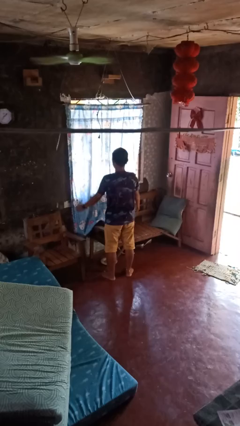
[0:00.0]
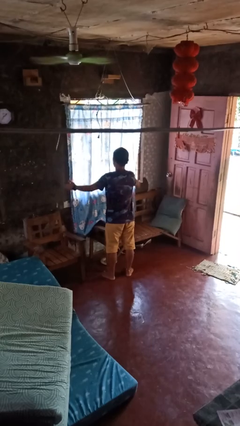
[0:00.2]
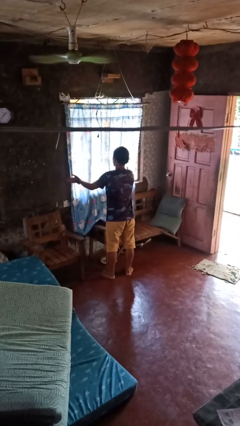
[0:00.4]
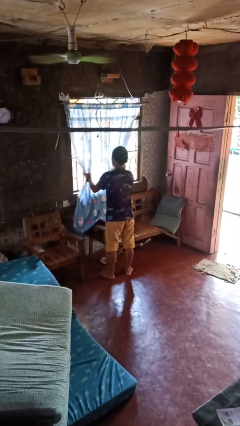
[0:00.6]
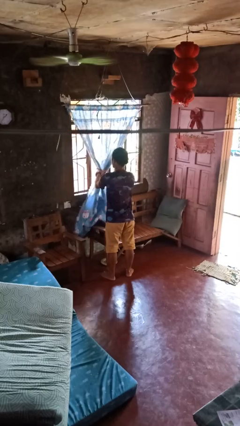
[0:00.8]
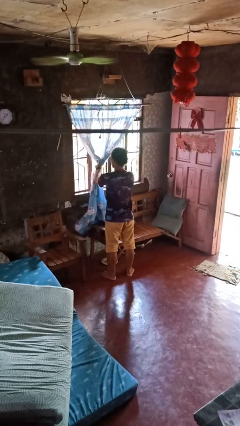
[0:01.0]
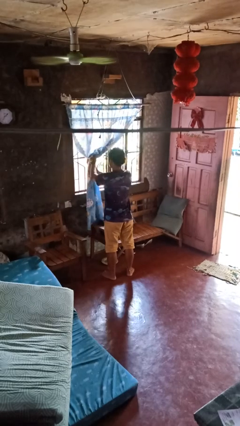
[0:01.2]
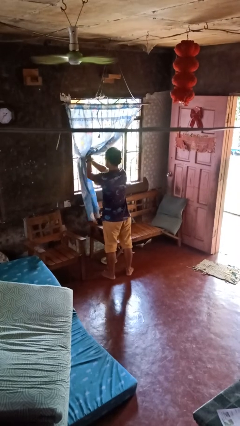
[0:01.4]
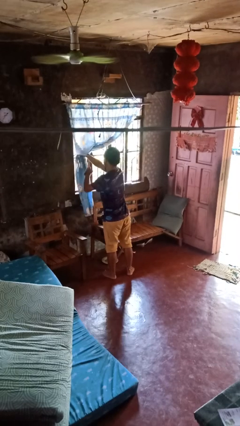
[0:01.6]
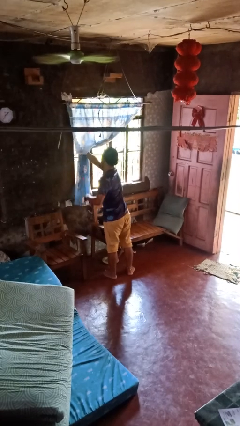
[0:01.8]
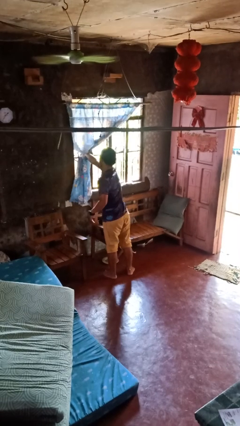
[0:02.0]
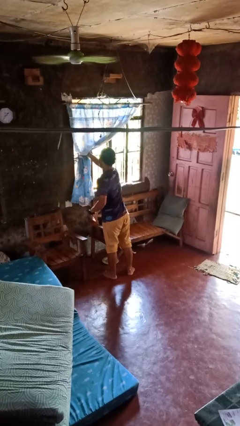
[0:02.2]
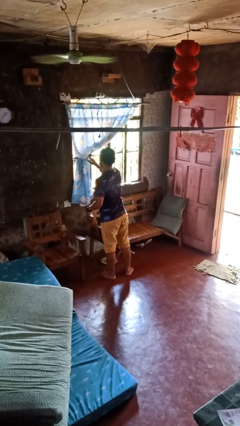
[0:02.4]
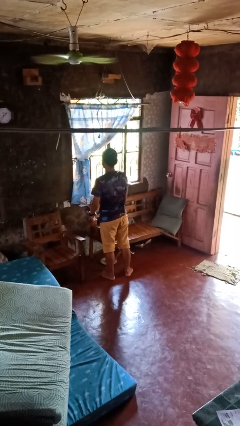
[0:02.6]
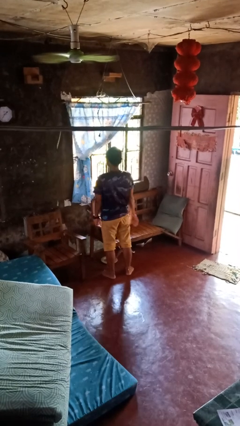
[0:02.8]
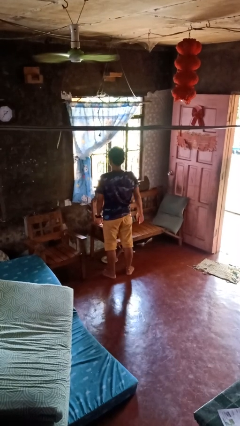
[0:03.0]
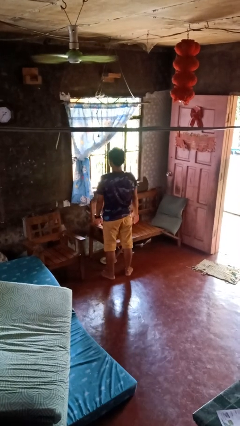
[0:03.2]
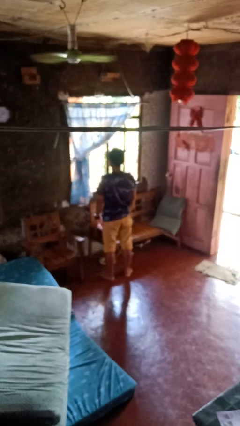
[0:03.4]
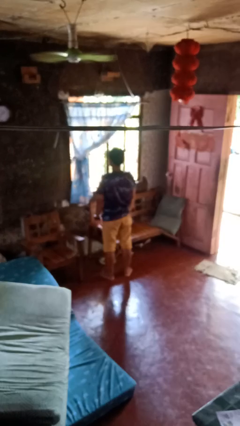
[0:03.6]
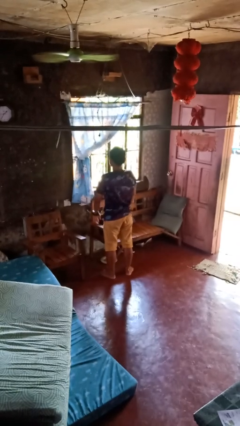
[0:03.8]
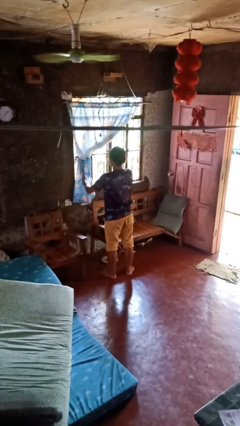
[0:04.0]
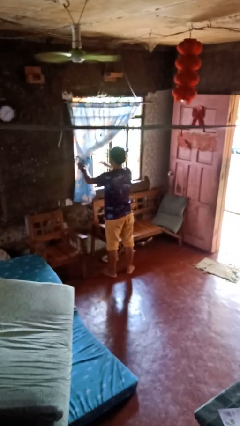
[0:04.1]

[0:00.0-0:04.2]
person opens curtains

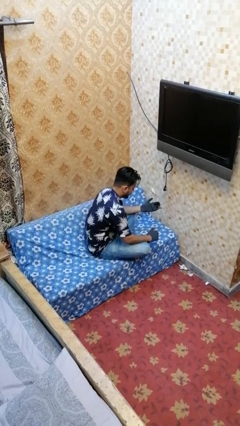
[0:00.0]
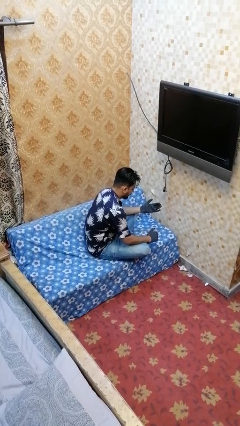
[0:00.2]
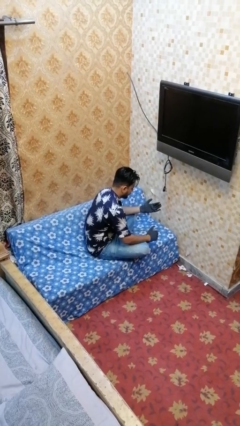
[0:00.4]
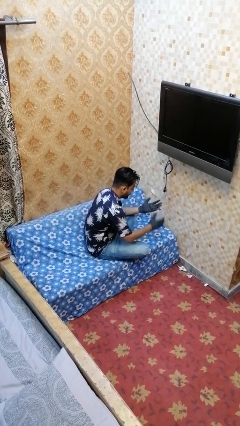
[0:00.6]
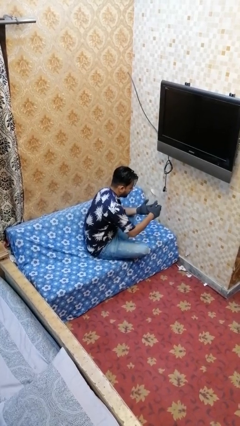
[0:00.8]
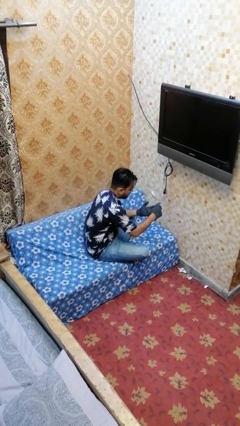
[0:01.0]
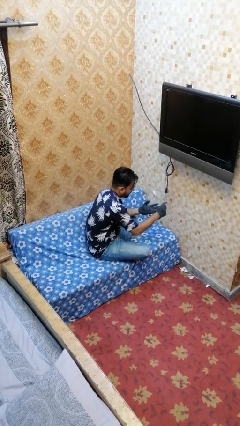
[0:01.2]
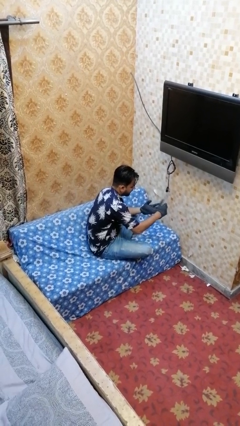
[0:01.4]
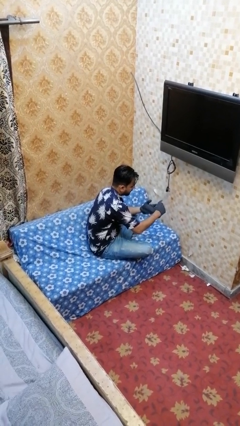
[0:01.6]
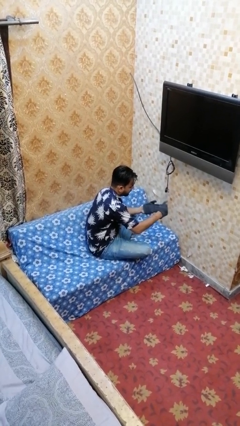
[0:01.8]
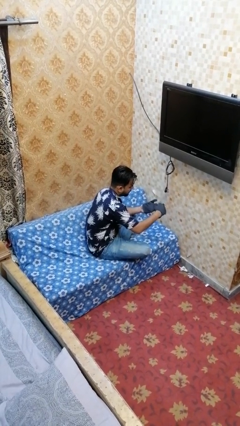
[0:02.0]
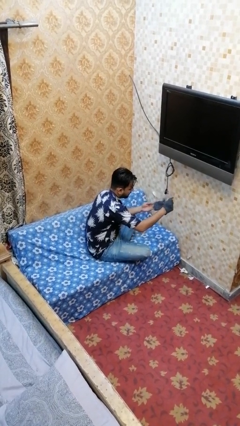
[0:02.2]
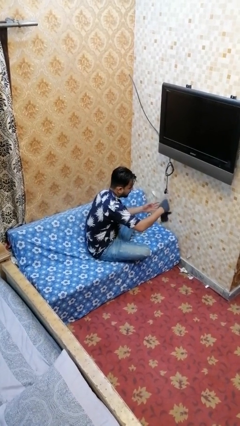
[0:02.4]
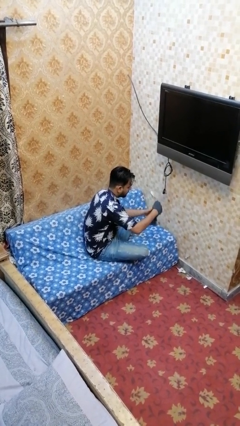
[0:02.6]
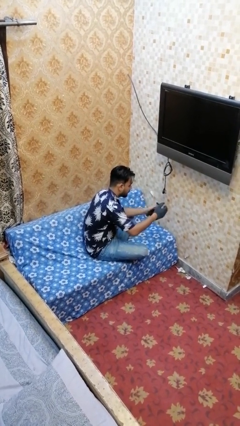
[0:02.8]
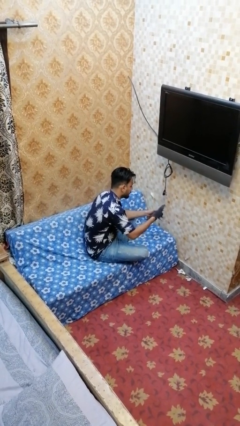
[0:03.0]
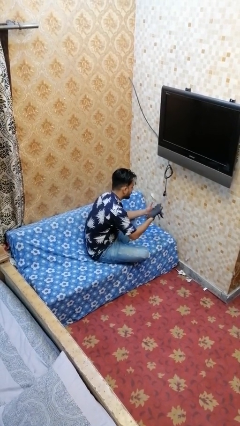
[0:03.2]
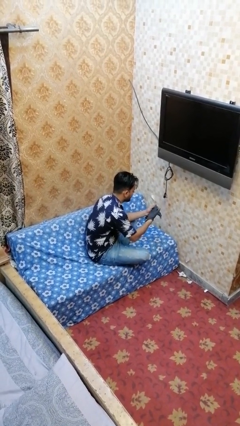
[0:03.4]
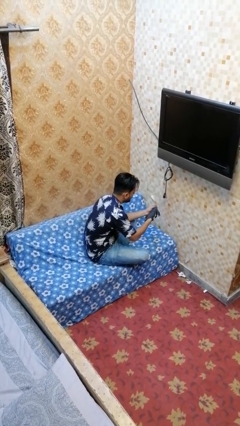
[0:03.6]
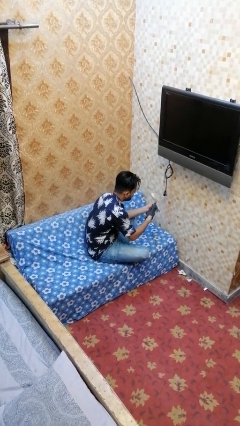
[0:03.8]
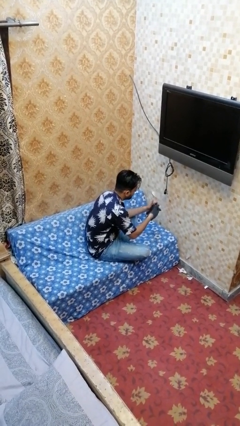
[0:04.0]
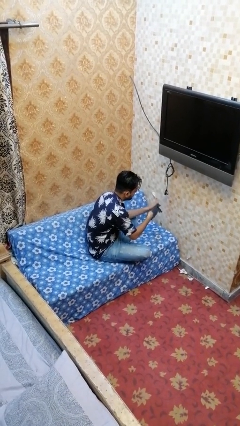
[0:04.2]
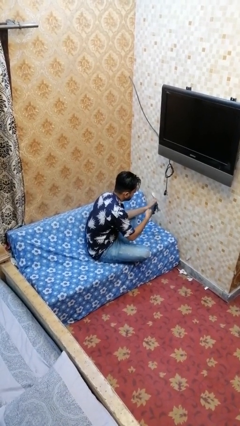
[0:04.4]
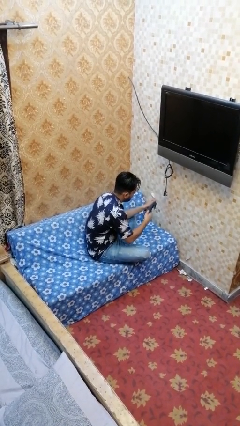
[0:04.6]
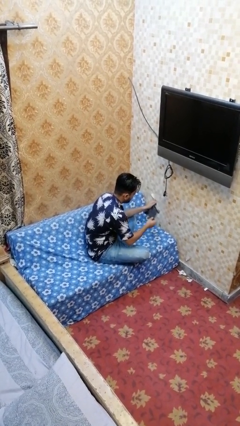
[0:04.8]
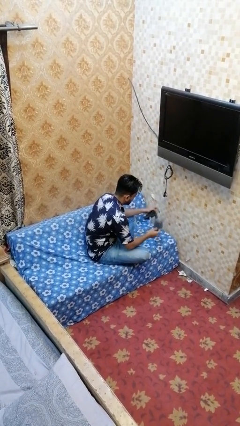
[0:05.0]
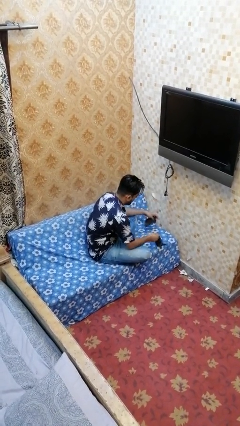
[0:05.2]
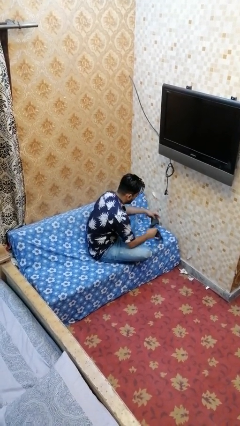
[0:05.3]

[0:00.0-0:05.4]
person takes off gloves

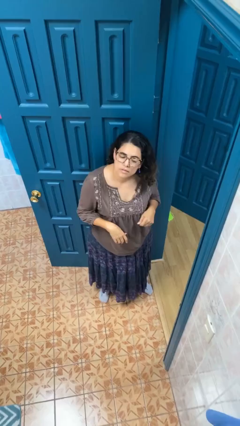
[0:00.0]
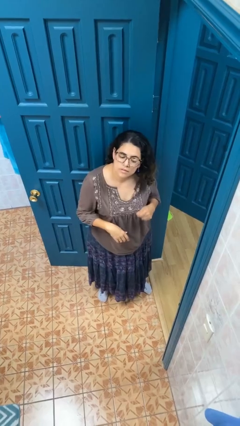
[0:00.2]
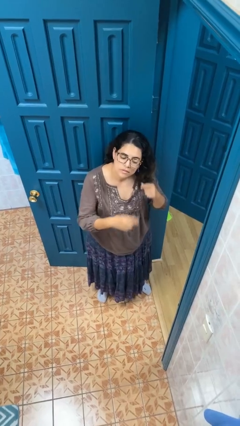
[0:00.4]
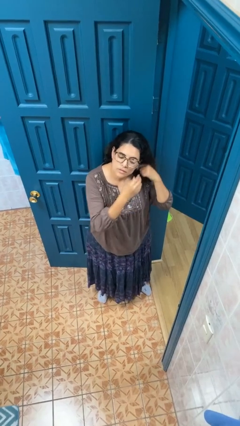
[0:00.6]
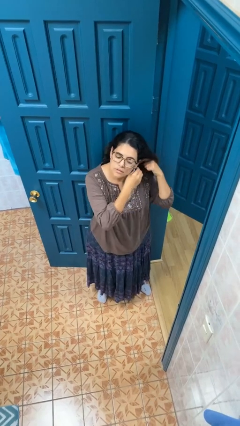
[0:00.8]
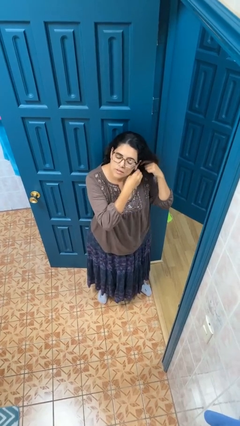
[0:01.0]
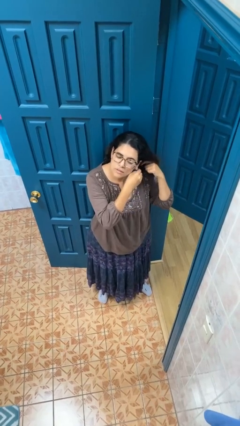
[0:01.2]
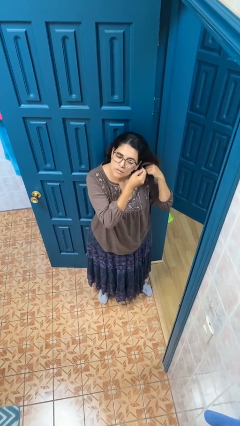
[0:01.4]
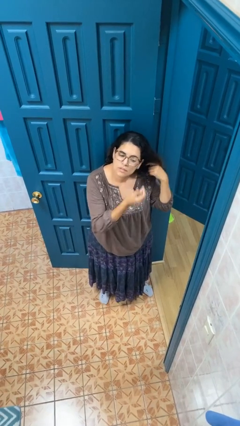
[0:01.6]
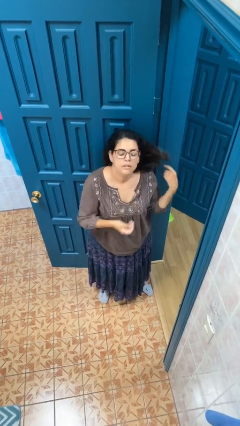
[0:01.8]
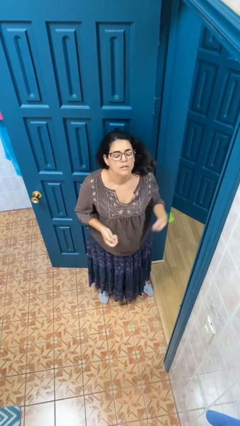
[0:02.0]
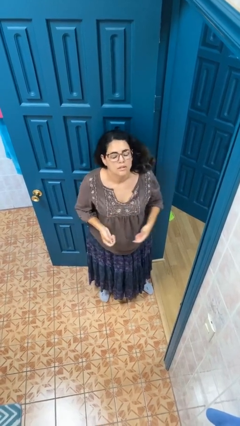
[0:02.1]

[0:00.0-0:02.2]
person takes off earrings

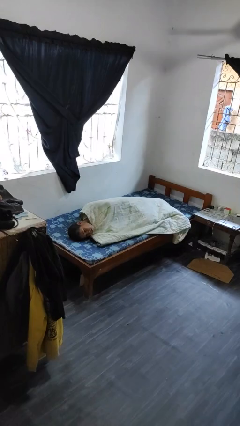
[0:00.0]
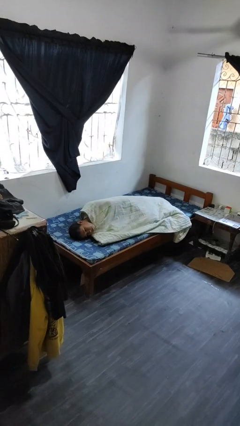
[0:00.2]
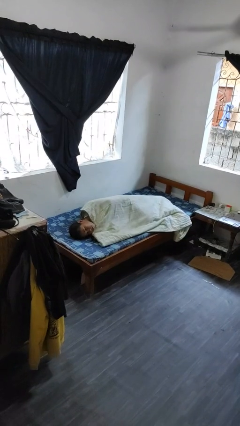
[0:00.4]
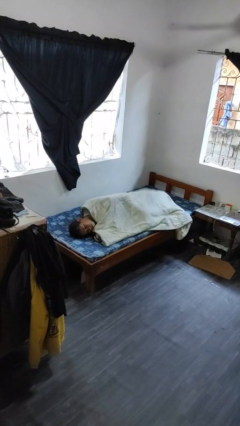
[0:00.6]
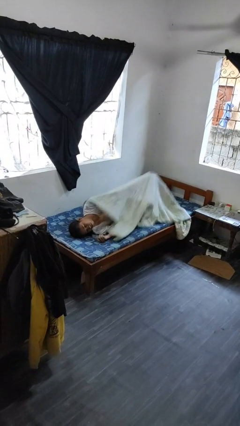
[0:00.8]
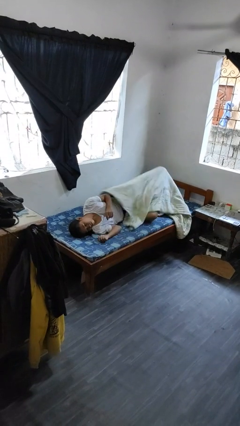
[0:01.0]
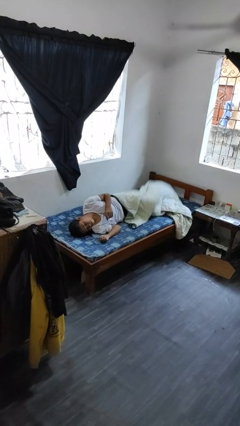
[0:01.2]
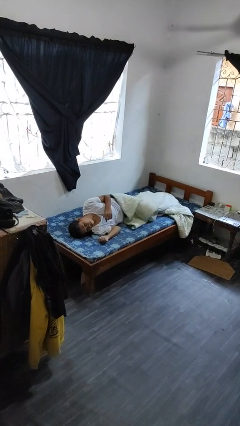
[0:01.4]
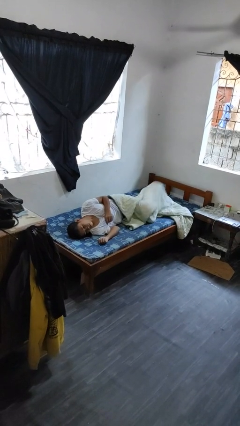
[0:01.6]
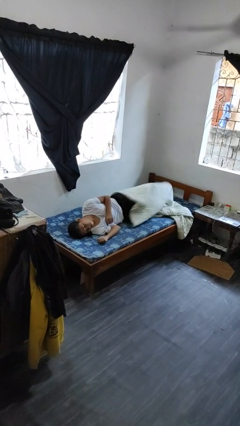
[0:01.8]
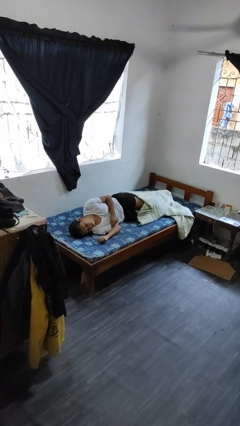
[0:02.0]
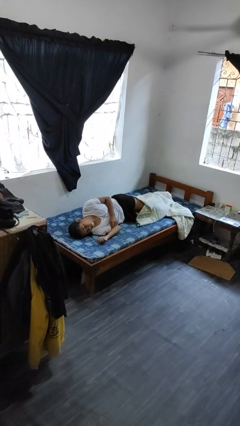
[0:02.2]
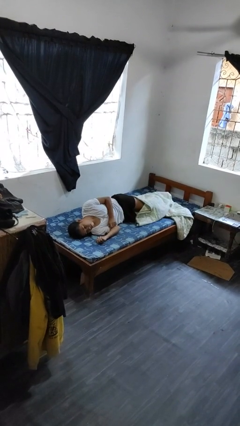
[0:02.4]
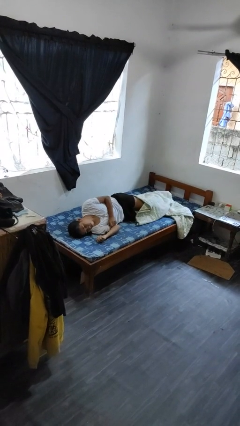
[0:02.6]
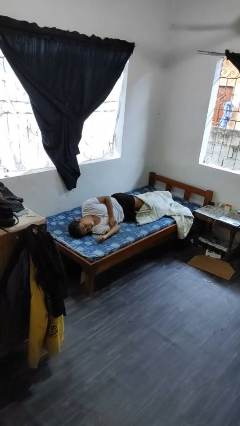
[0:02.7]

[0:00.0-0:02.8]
person uncovers with bedsheets

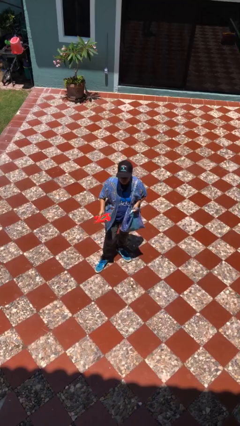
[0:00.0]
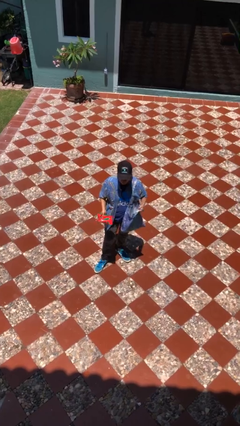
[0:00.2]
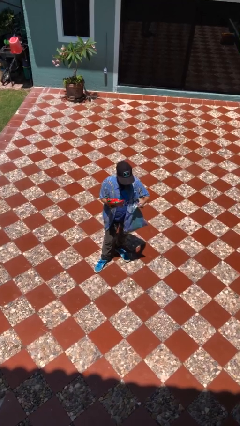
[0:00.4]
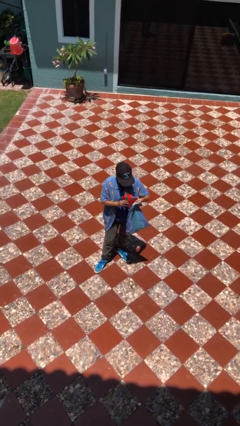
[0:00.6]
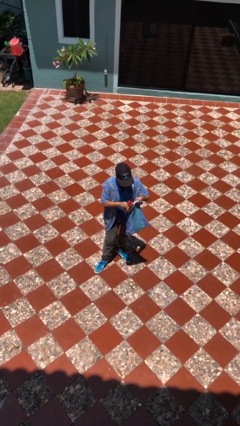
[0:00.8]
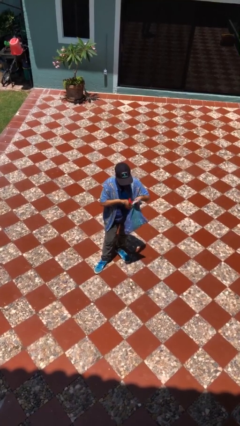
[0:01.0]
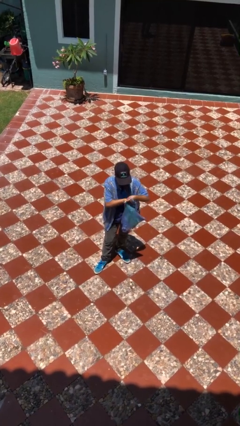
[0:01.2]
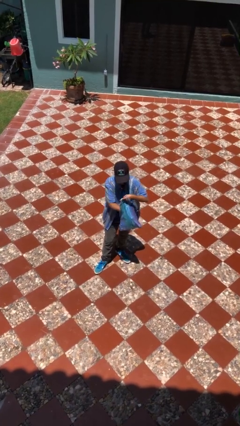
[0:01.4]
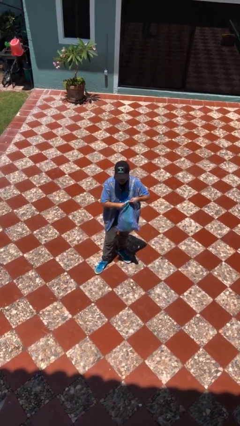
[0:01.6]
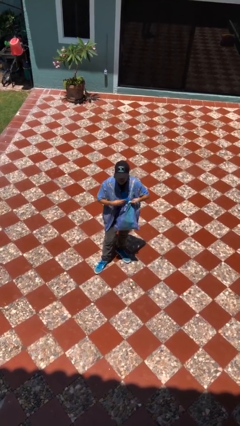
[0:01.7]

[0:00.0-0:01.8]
person puts object into purse

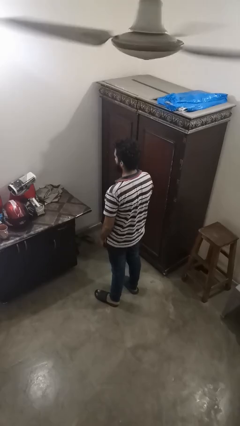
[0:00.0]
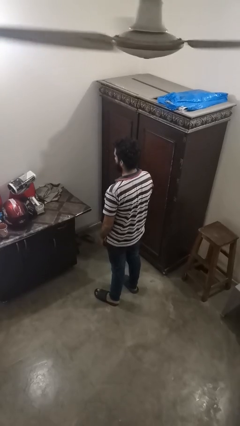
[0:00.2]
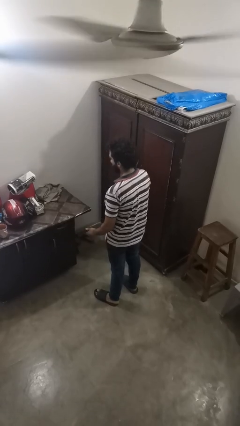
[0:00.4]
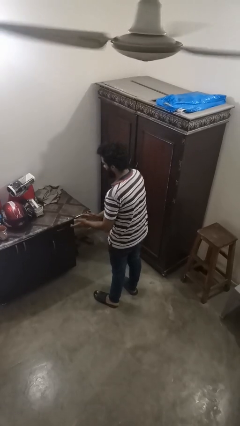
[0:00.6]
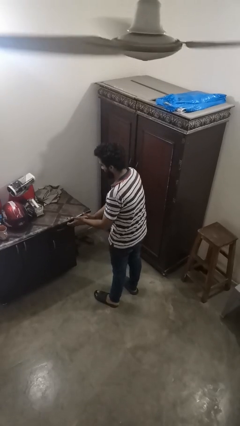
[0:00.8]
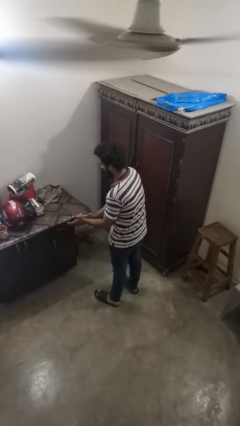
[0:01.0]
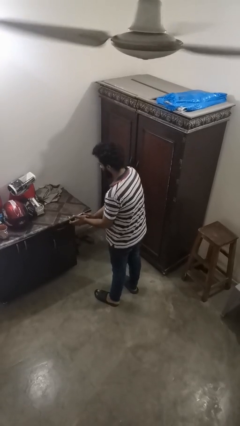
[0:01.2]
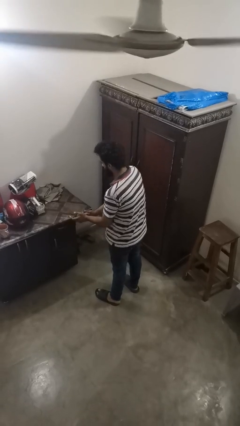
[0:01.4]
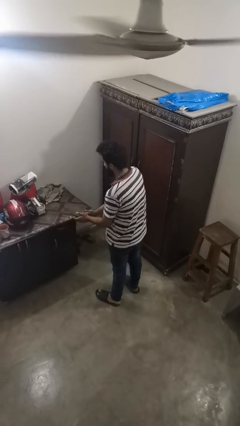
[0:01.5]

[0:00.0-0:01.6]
person claps hands
